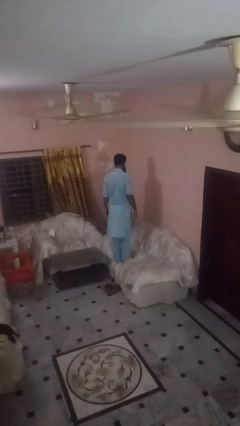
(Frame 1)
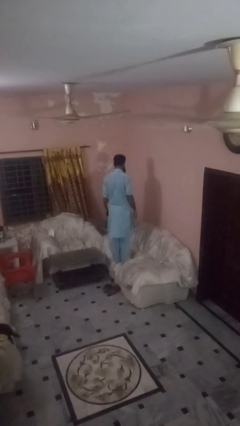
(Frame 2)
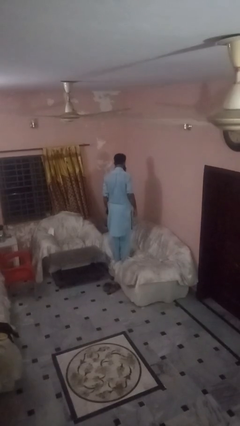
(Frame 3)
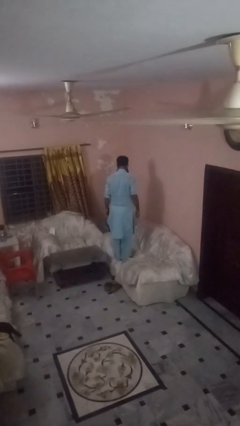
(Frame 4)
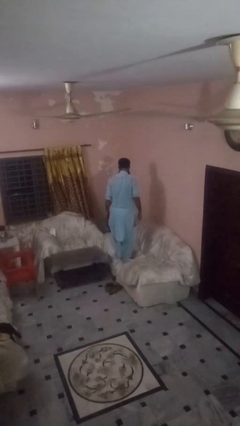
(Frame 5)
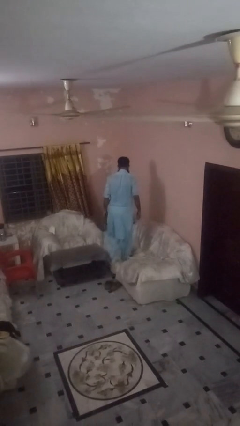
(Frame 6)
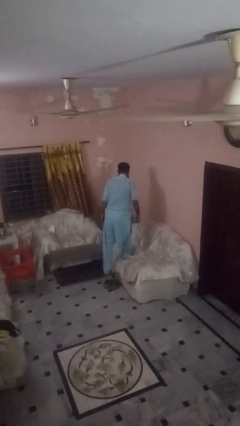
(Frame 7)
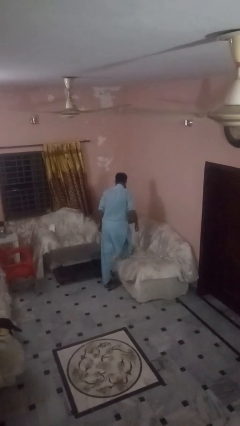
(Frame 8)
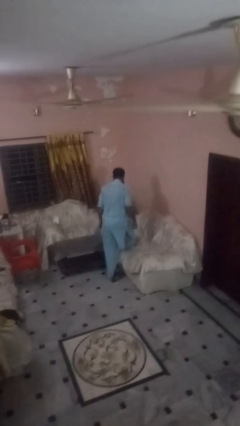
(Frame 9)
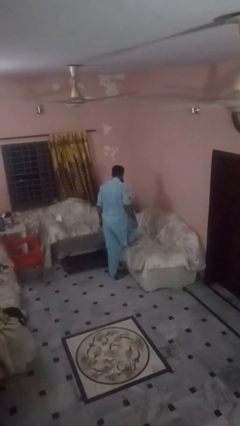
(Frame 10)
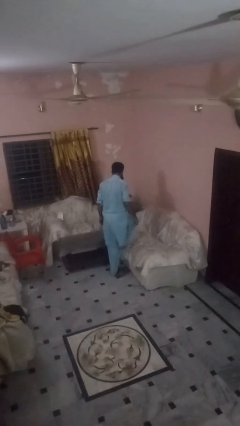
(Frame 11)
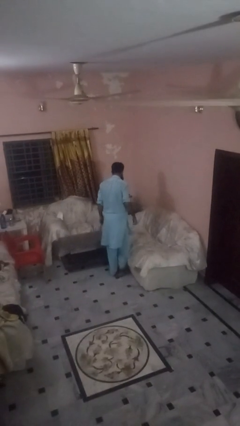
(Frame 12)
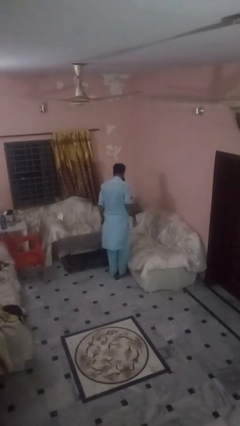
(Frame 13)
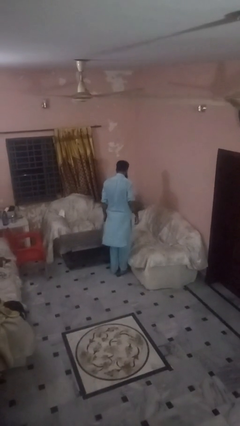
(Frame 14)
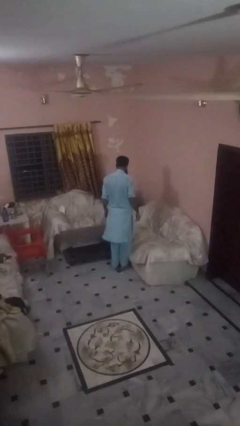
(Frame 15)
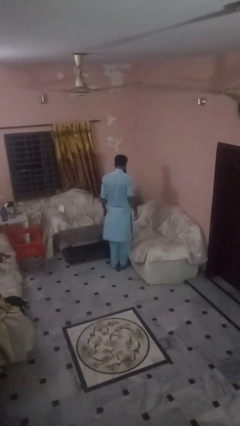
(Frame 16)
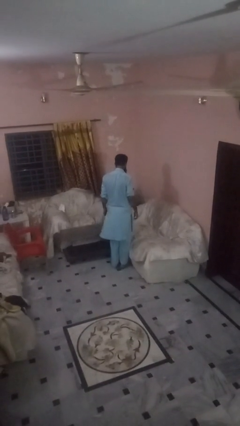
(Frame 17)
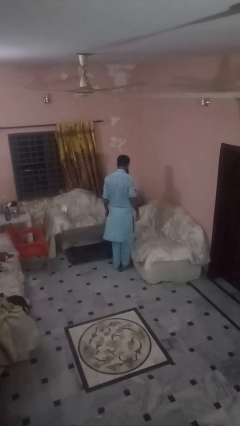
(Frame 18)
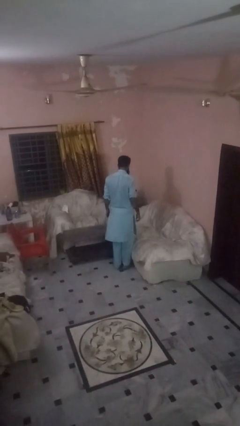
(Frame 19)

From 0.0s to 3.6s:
person climbs off couch

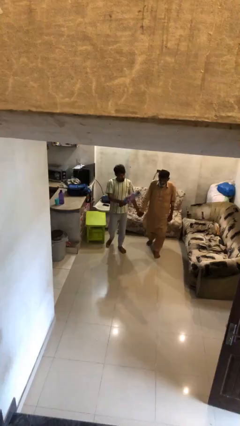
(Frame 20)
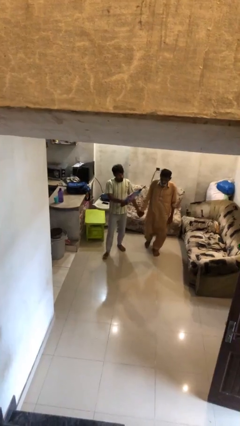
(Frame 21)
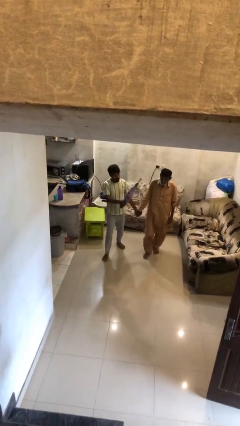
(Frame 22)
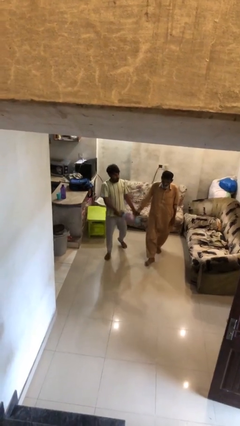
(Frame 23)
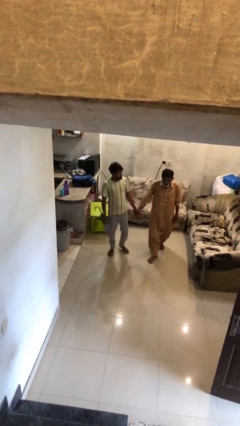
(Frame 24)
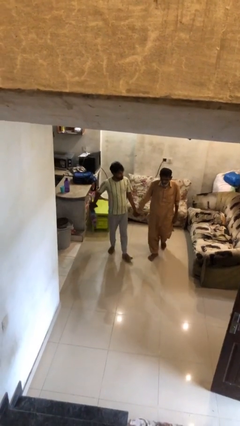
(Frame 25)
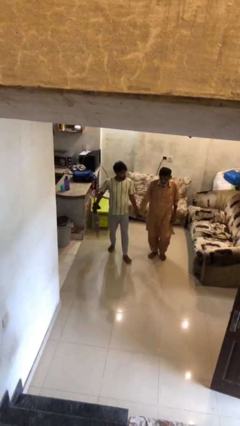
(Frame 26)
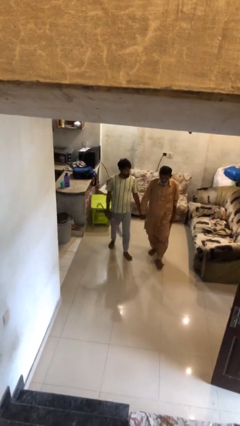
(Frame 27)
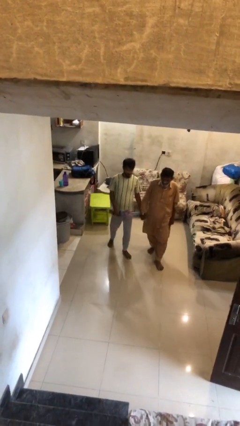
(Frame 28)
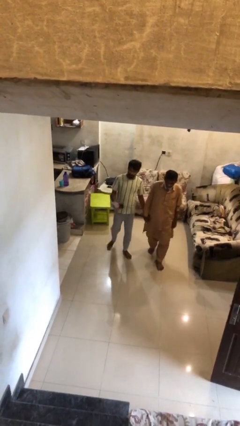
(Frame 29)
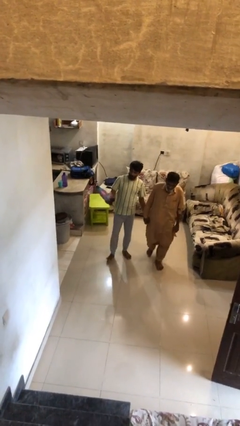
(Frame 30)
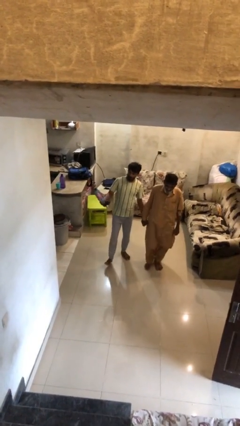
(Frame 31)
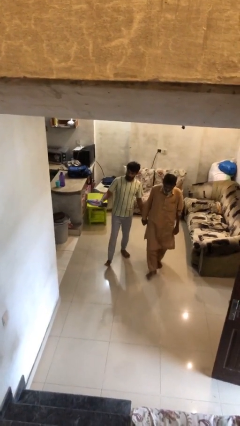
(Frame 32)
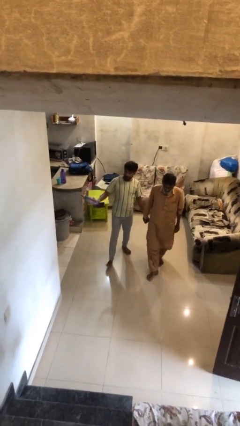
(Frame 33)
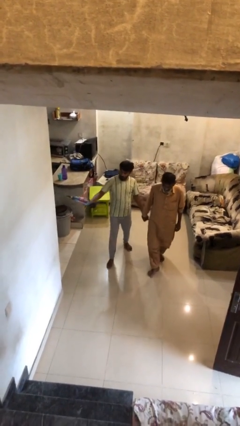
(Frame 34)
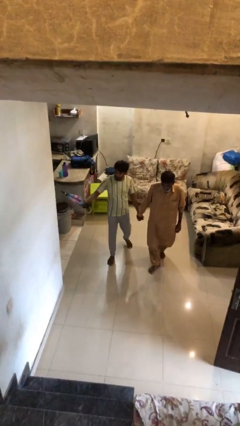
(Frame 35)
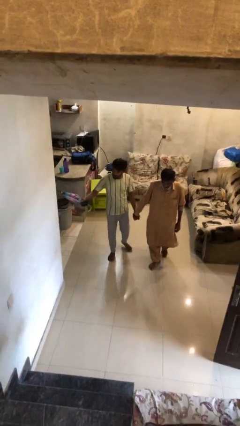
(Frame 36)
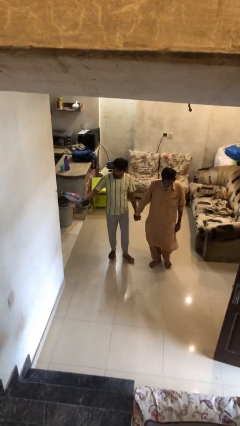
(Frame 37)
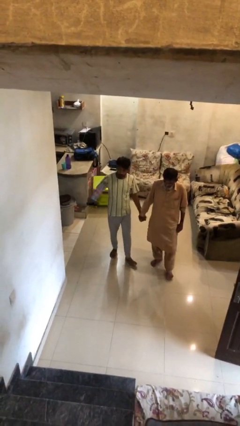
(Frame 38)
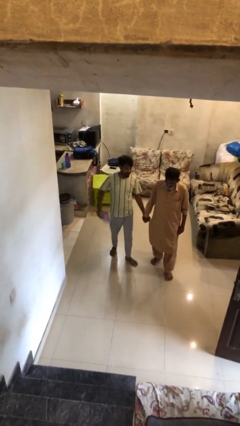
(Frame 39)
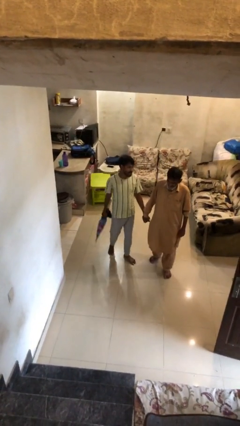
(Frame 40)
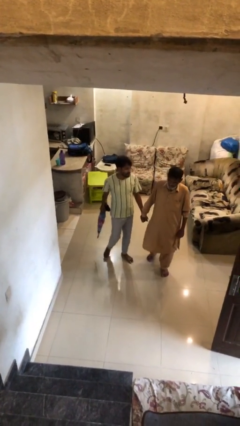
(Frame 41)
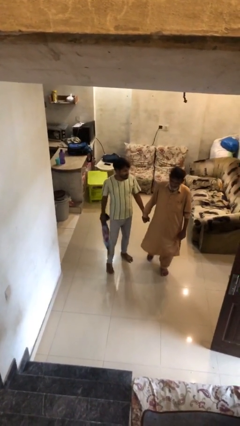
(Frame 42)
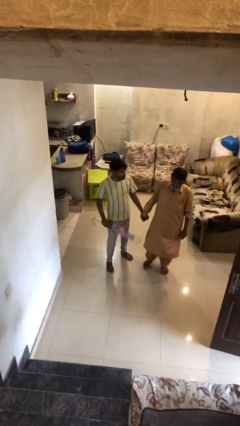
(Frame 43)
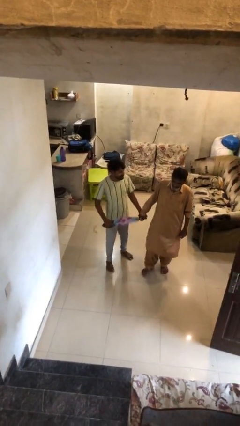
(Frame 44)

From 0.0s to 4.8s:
person holds hand

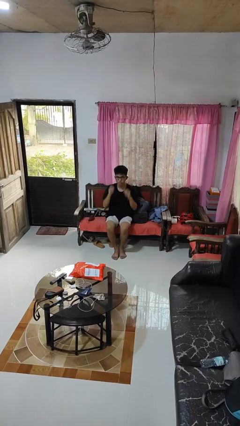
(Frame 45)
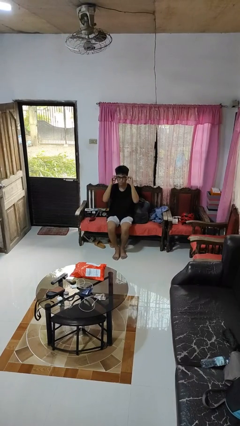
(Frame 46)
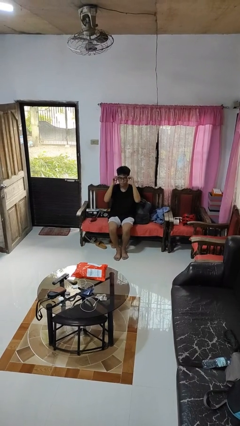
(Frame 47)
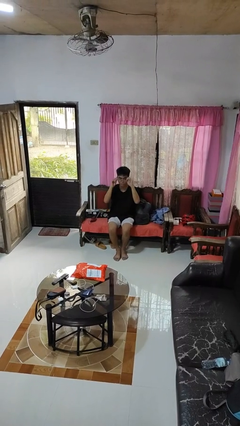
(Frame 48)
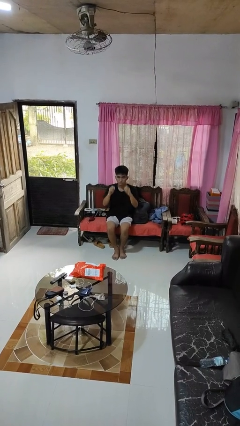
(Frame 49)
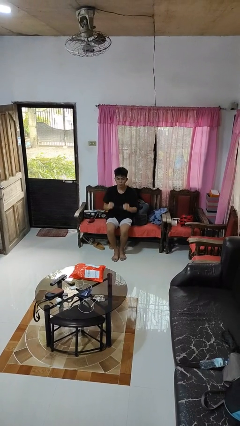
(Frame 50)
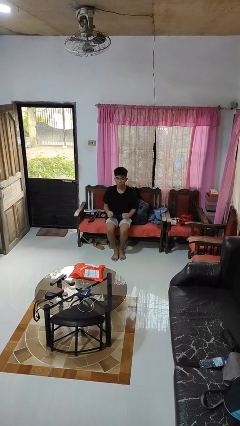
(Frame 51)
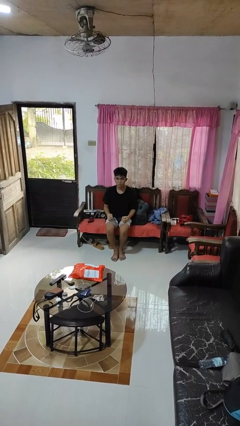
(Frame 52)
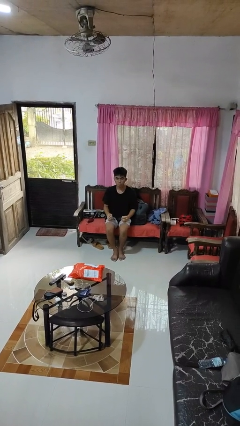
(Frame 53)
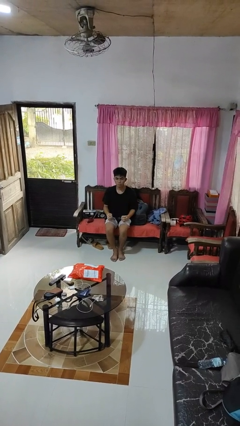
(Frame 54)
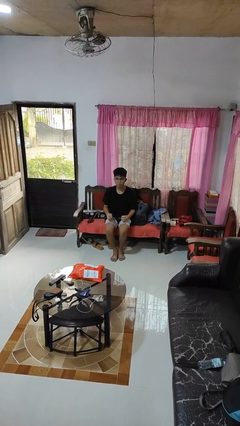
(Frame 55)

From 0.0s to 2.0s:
person takes off glasses

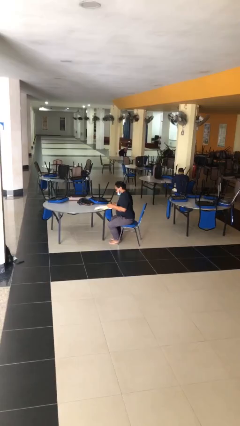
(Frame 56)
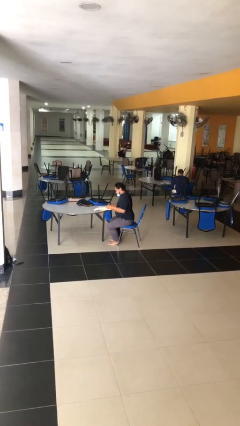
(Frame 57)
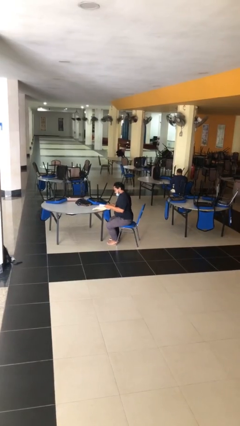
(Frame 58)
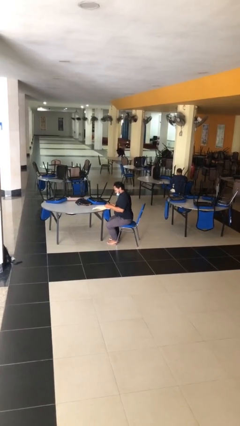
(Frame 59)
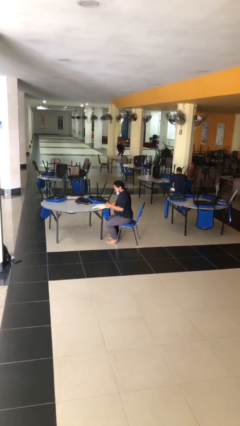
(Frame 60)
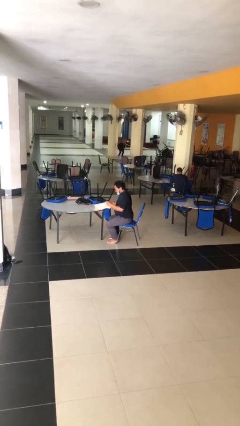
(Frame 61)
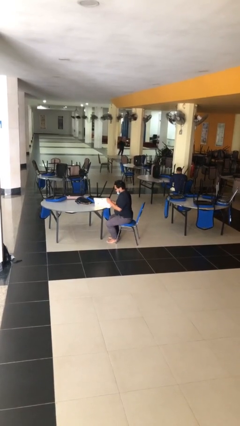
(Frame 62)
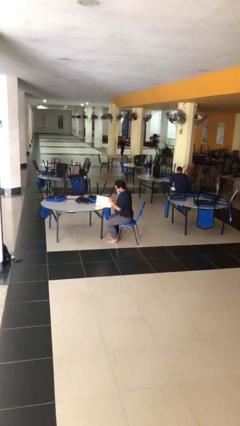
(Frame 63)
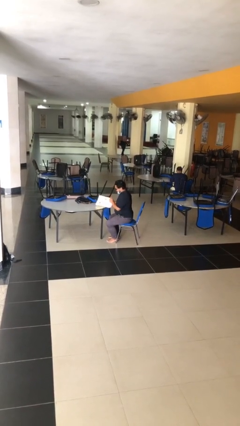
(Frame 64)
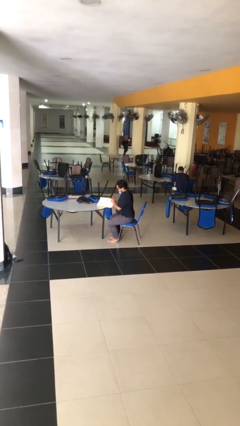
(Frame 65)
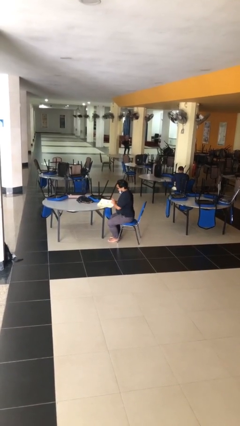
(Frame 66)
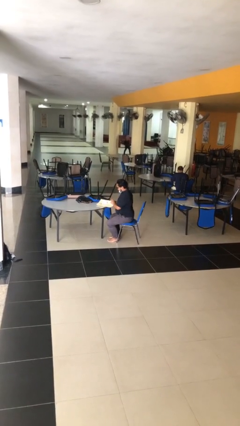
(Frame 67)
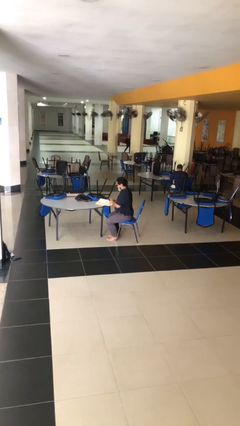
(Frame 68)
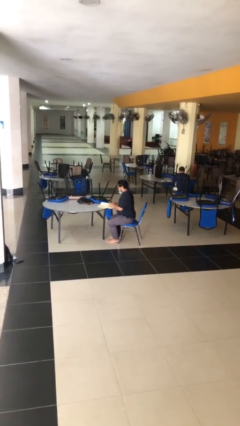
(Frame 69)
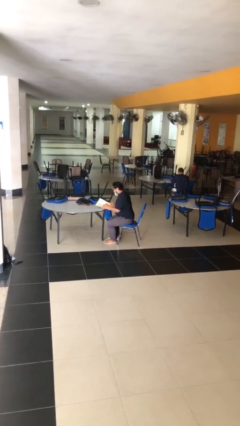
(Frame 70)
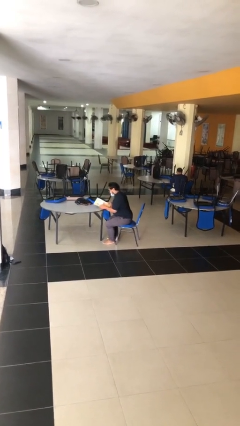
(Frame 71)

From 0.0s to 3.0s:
person reads document

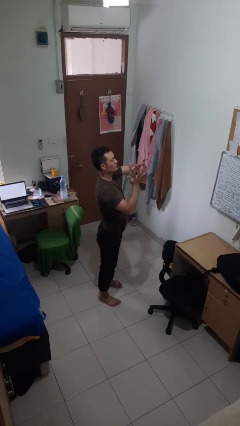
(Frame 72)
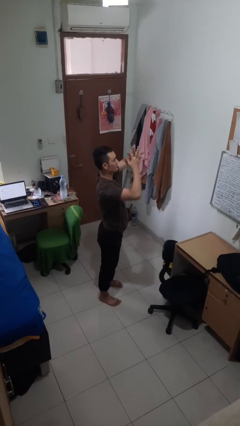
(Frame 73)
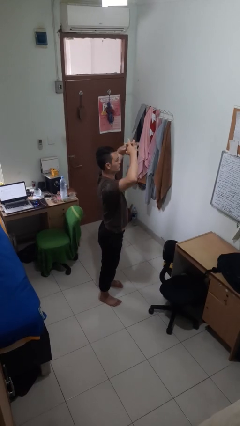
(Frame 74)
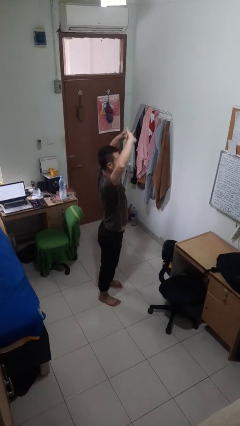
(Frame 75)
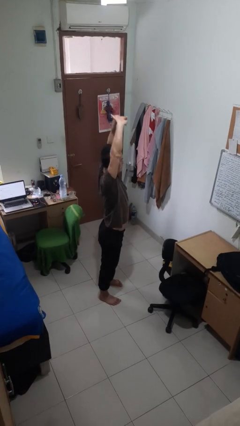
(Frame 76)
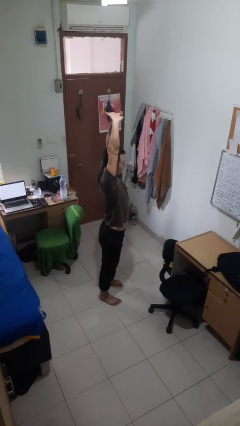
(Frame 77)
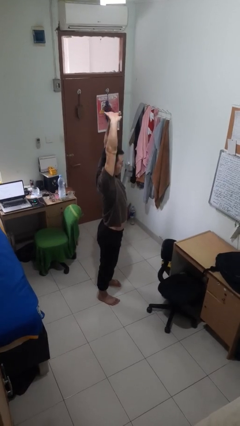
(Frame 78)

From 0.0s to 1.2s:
person stretches arms over head

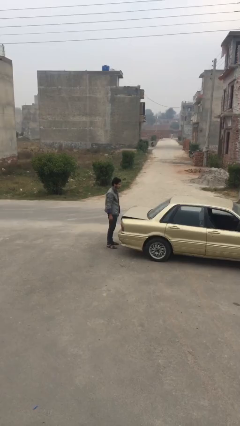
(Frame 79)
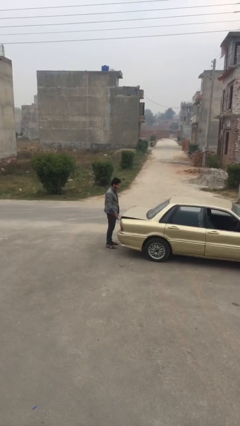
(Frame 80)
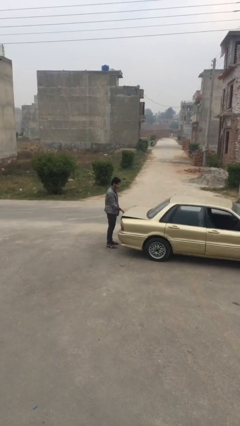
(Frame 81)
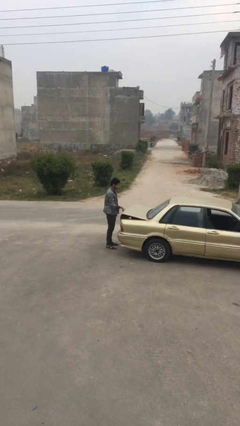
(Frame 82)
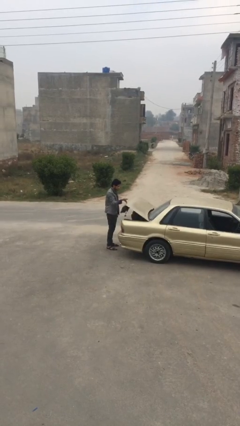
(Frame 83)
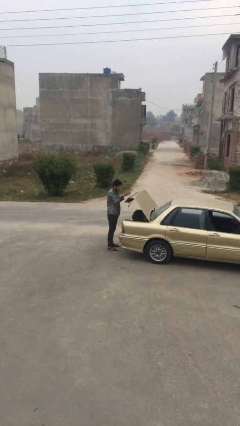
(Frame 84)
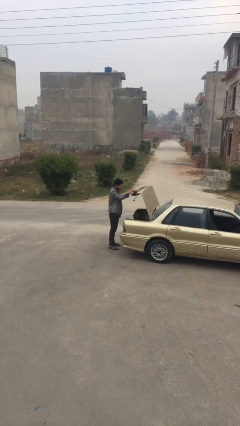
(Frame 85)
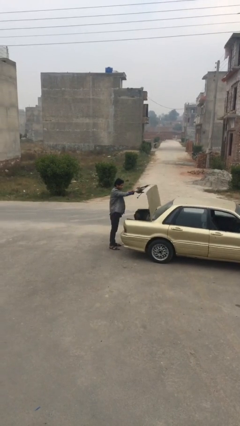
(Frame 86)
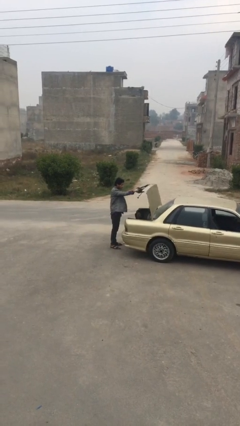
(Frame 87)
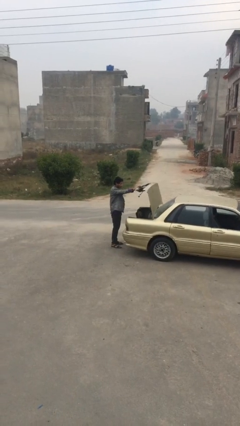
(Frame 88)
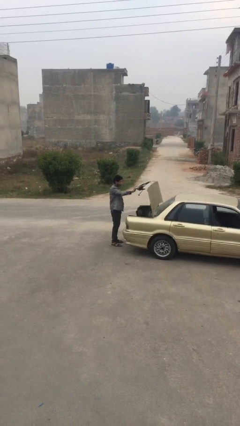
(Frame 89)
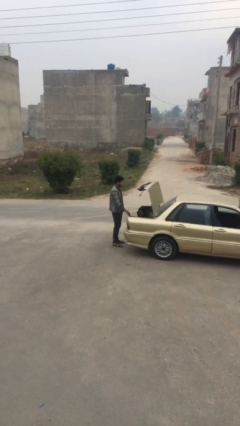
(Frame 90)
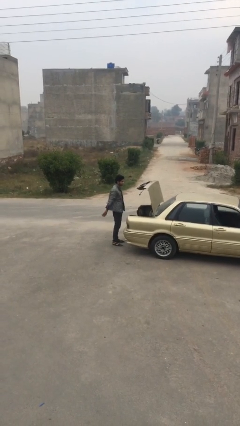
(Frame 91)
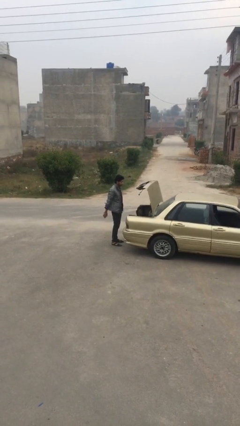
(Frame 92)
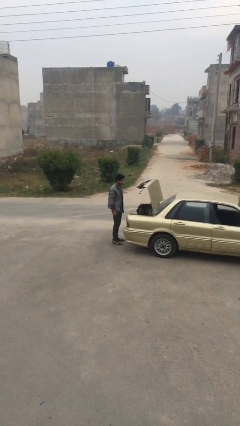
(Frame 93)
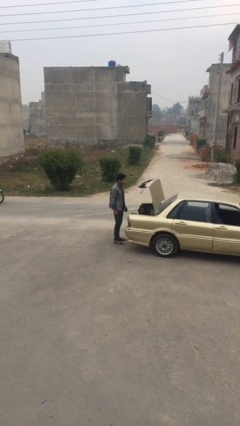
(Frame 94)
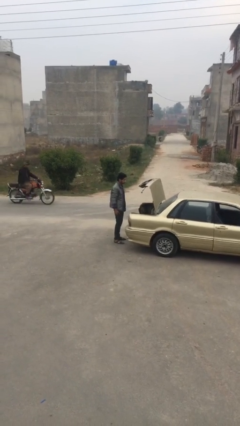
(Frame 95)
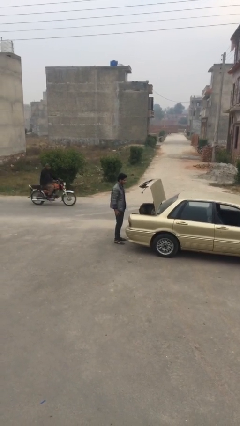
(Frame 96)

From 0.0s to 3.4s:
person opens car trunk
